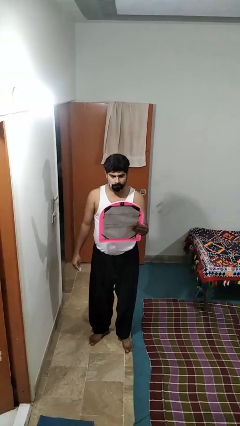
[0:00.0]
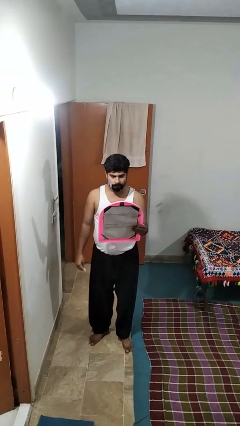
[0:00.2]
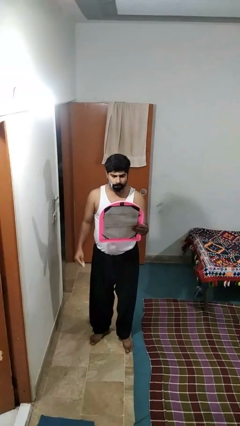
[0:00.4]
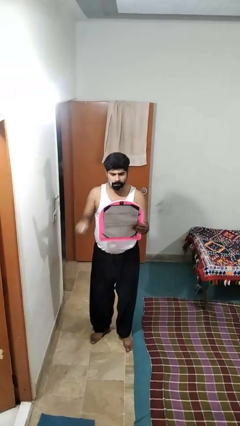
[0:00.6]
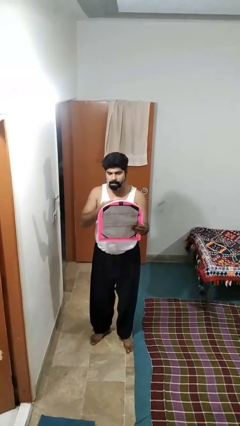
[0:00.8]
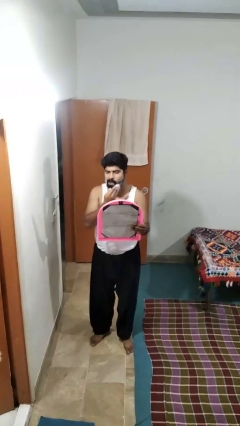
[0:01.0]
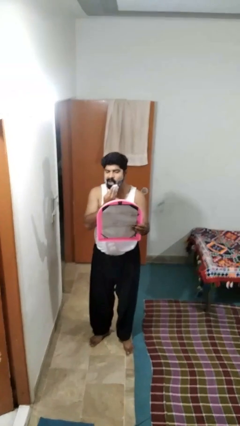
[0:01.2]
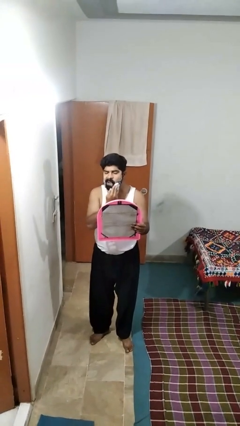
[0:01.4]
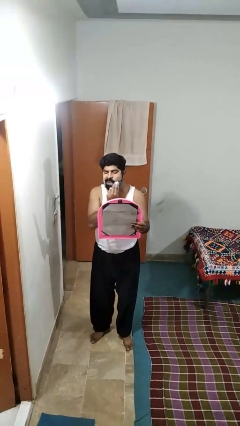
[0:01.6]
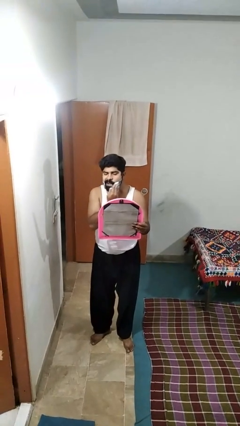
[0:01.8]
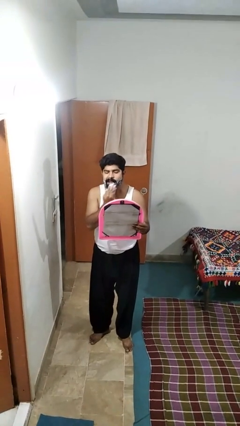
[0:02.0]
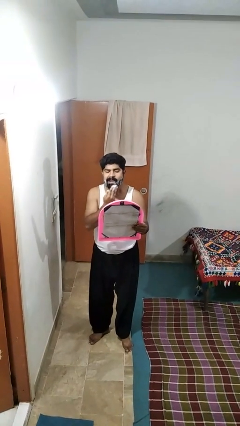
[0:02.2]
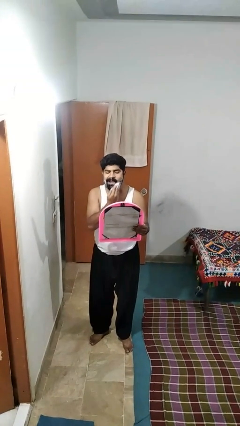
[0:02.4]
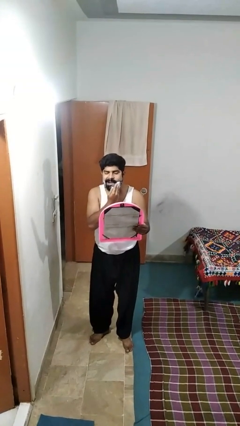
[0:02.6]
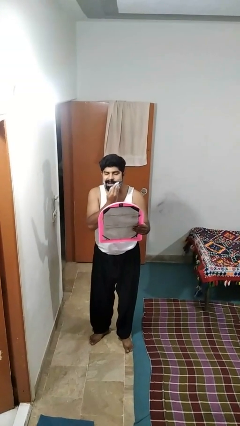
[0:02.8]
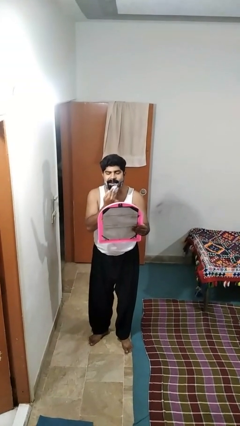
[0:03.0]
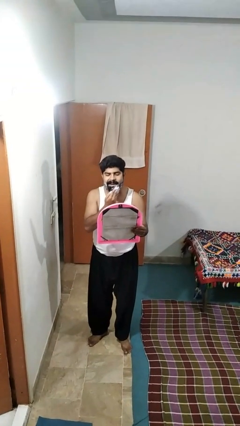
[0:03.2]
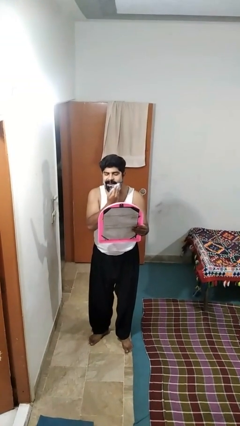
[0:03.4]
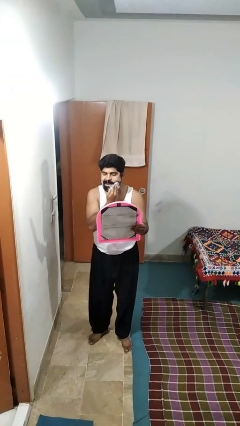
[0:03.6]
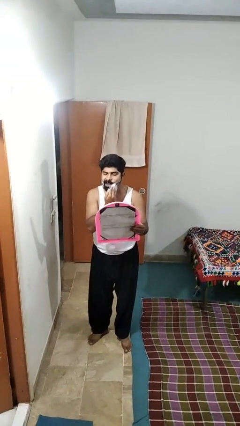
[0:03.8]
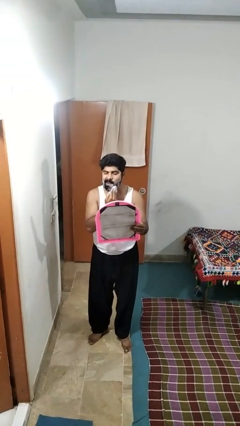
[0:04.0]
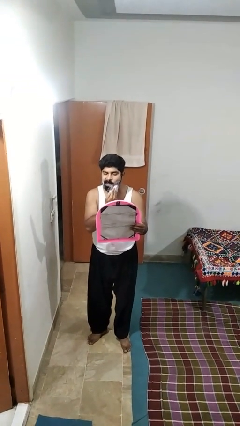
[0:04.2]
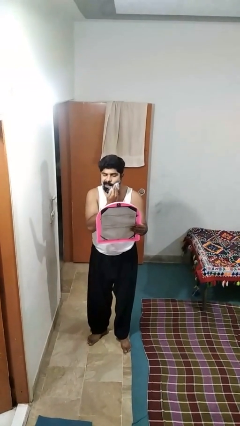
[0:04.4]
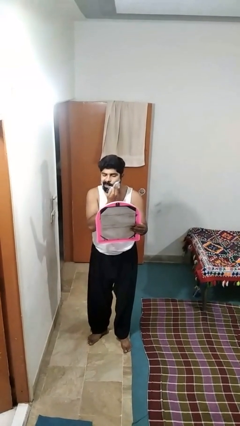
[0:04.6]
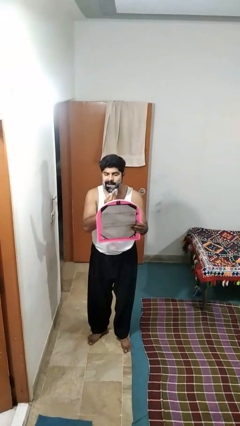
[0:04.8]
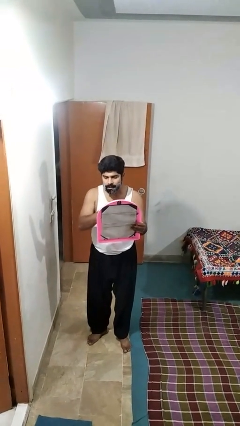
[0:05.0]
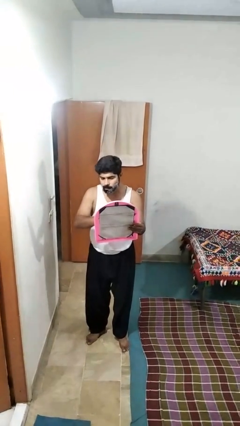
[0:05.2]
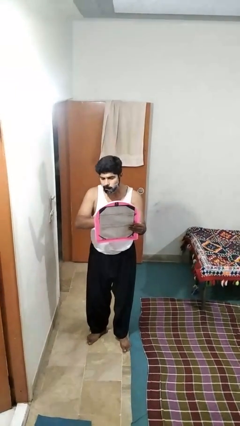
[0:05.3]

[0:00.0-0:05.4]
person applies shaving cream

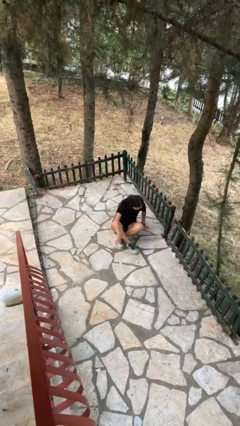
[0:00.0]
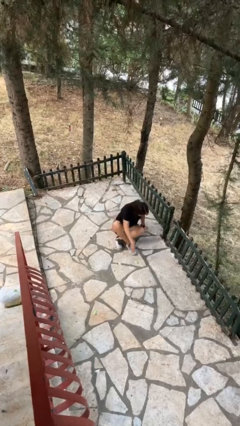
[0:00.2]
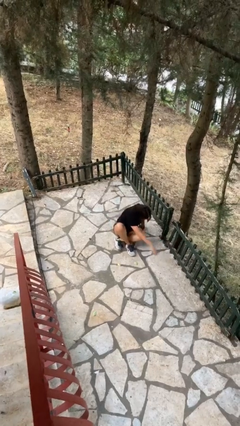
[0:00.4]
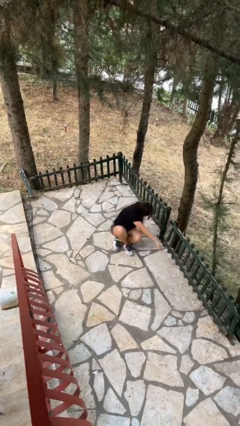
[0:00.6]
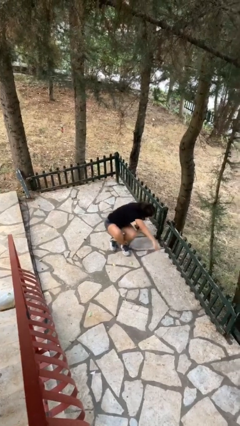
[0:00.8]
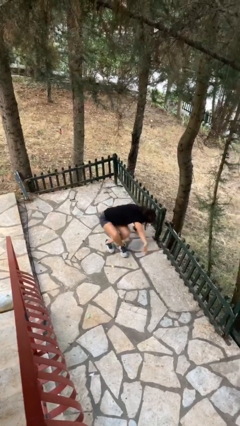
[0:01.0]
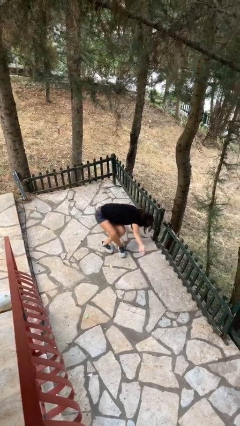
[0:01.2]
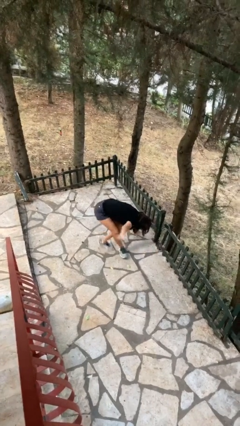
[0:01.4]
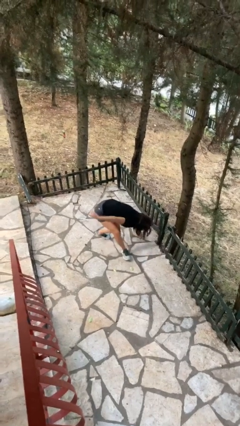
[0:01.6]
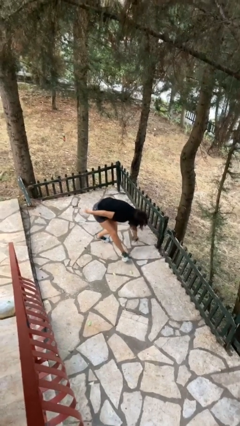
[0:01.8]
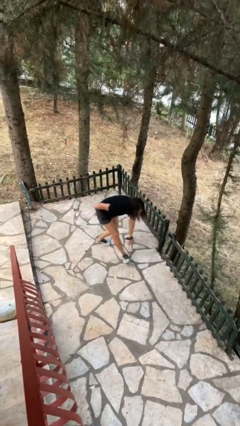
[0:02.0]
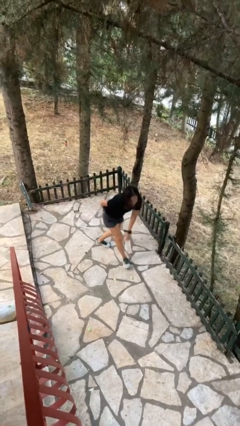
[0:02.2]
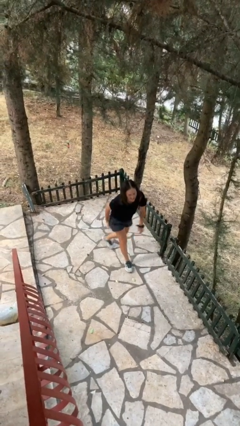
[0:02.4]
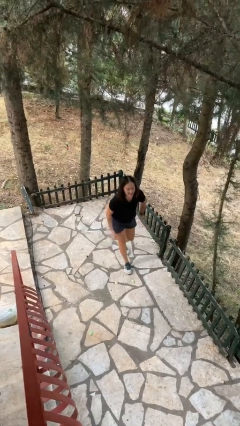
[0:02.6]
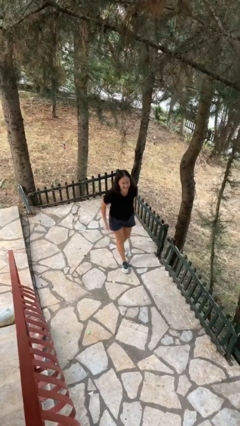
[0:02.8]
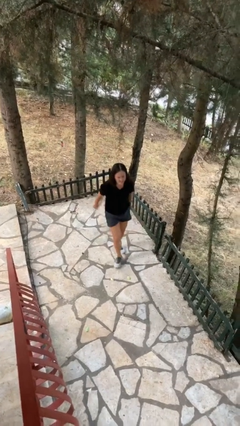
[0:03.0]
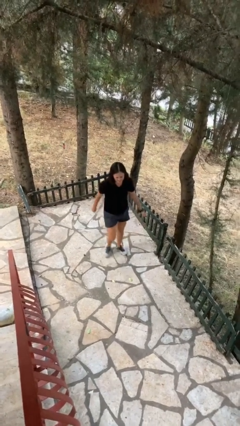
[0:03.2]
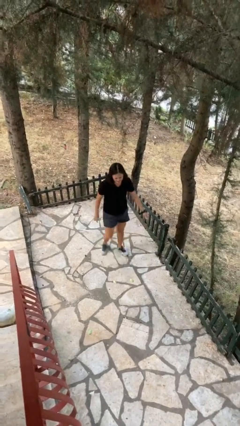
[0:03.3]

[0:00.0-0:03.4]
person stands up from floor

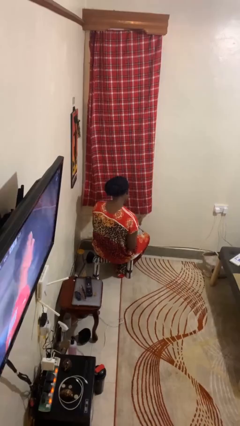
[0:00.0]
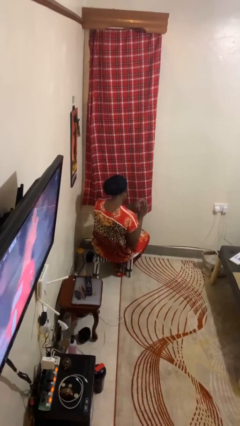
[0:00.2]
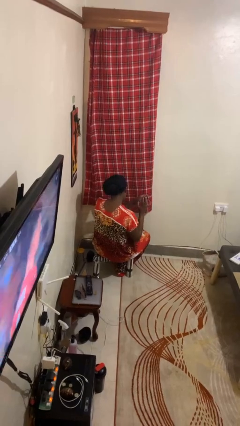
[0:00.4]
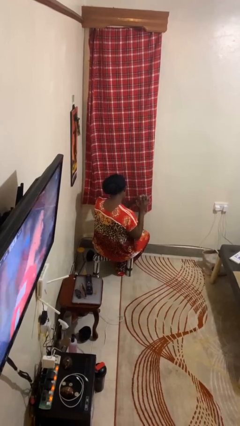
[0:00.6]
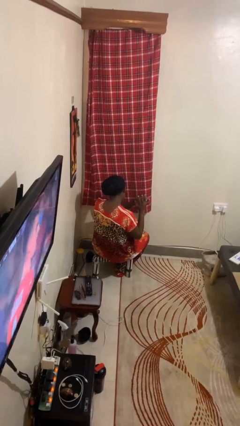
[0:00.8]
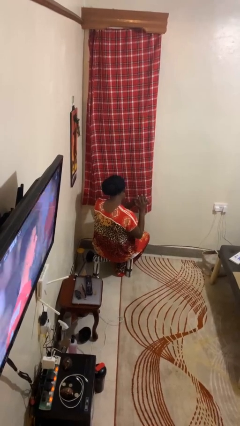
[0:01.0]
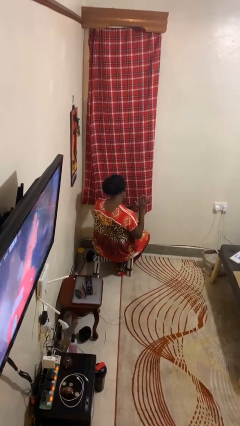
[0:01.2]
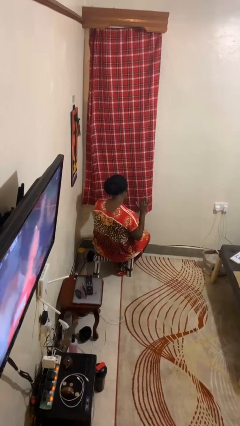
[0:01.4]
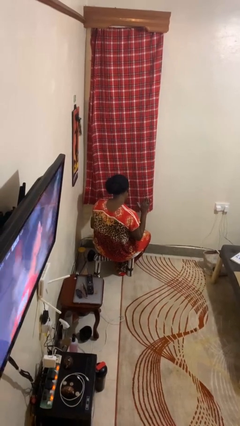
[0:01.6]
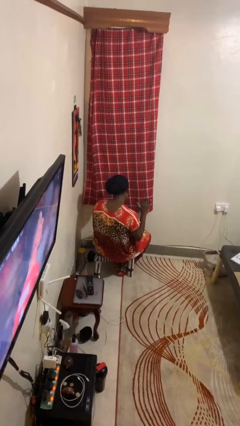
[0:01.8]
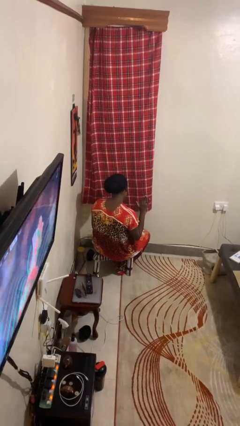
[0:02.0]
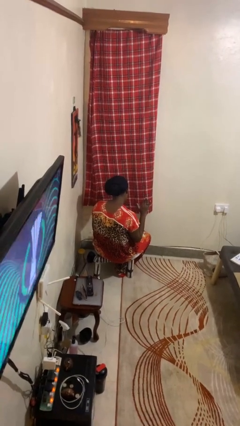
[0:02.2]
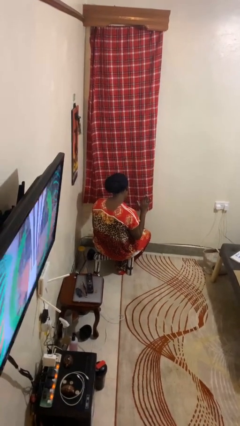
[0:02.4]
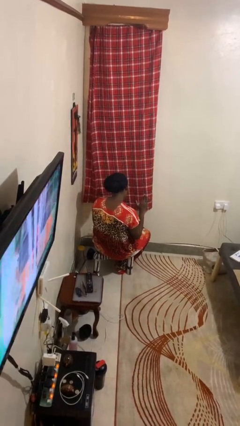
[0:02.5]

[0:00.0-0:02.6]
person puts on ring

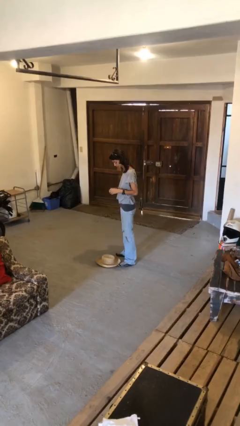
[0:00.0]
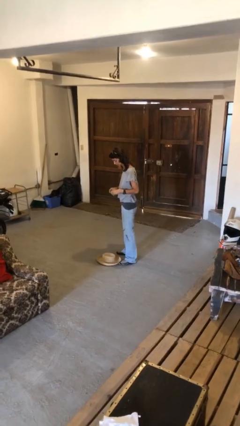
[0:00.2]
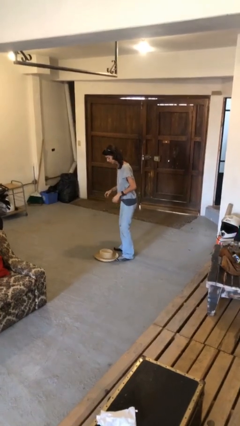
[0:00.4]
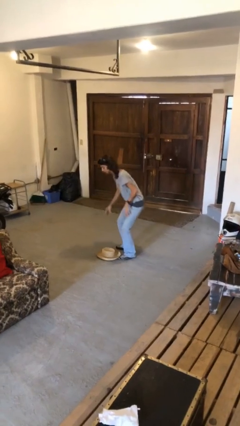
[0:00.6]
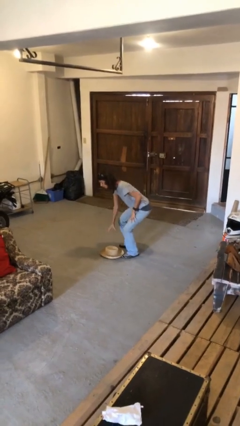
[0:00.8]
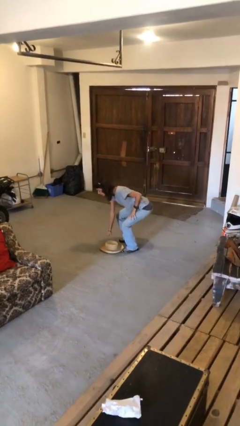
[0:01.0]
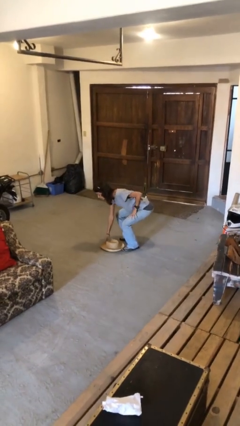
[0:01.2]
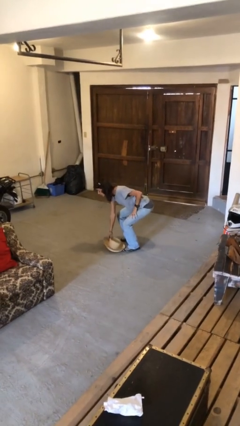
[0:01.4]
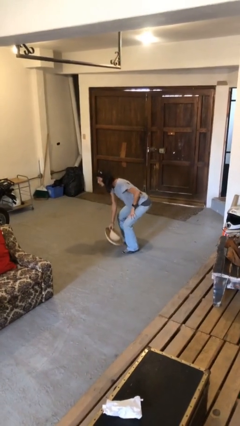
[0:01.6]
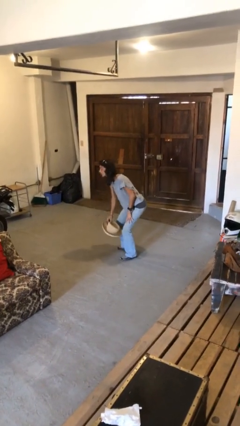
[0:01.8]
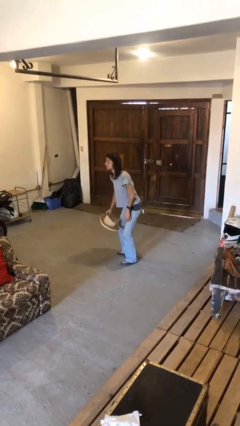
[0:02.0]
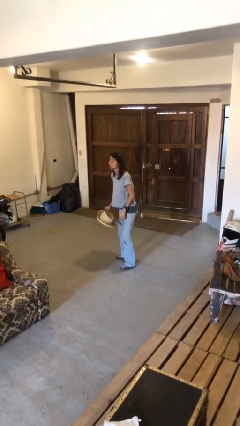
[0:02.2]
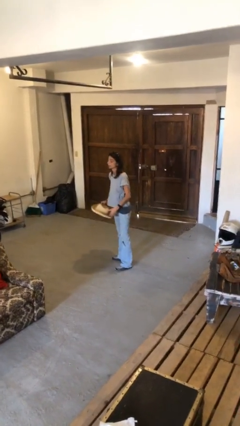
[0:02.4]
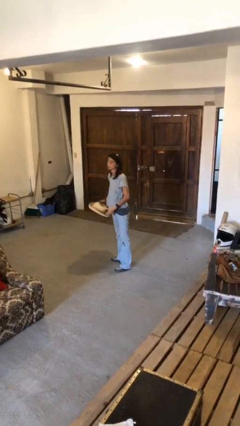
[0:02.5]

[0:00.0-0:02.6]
person picks up object from floor

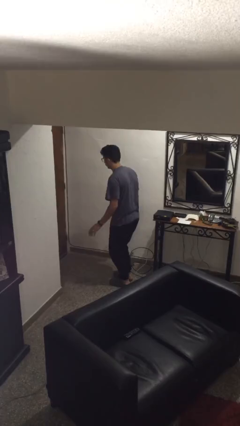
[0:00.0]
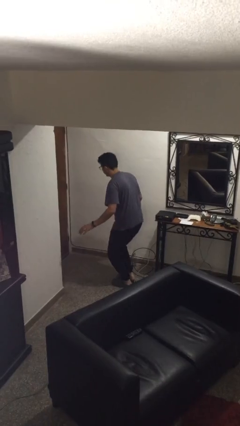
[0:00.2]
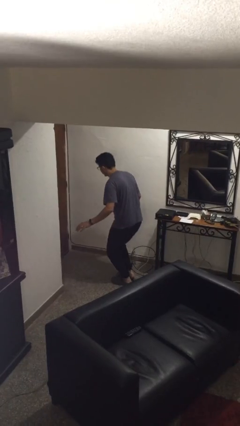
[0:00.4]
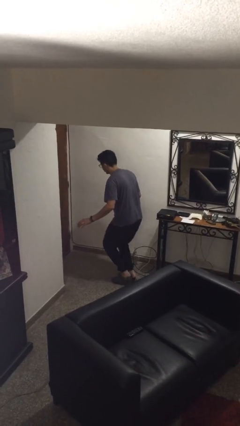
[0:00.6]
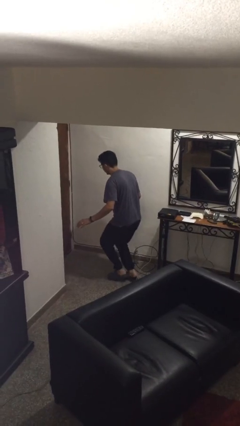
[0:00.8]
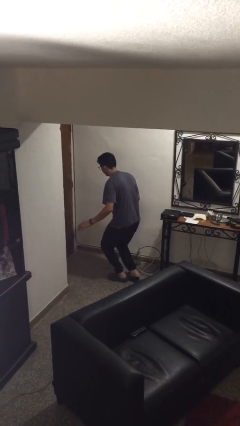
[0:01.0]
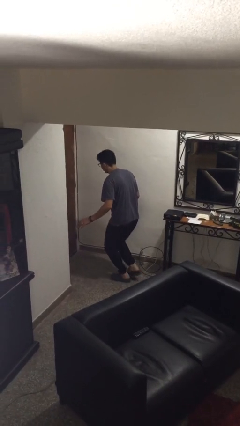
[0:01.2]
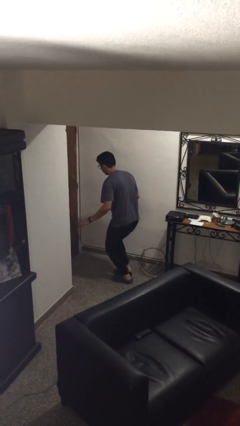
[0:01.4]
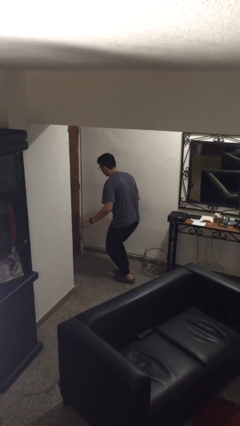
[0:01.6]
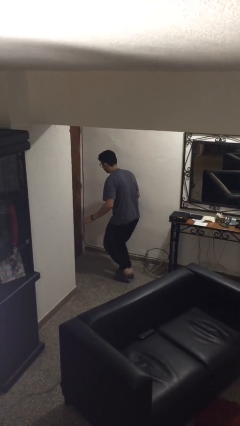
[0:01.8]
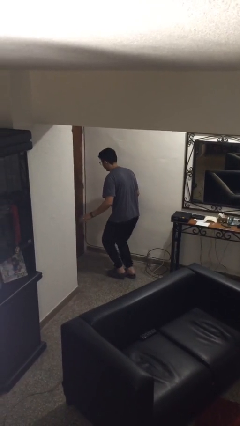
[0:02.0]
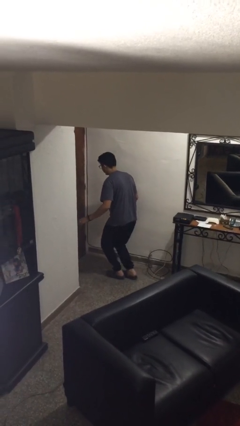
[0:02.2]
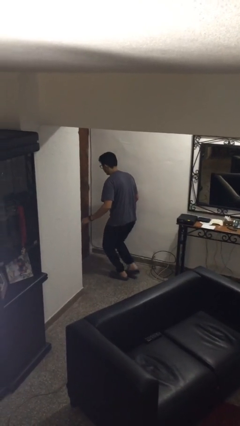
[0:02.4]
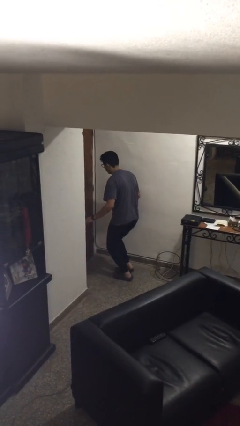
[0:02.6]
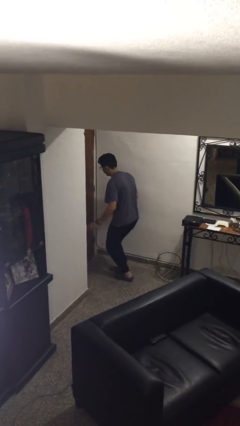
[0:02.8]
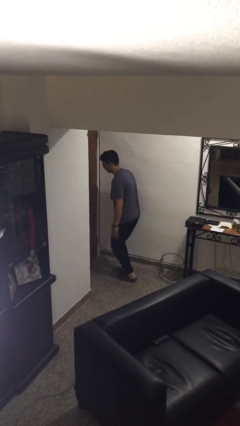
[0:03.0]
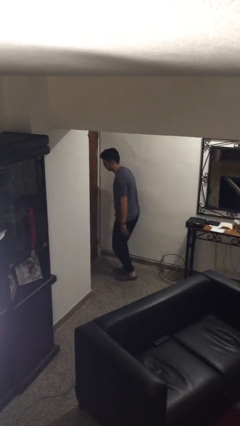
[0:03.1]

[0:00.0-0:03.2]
person walks tiptoe

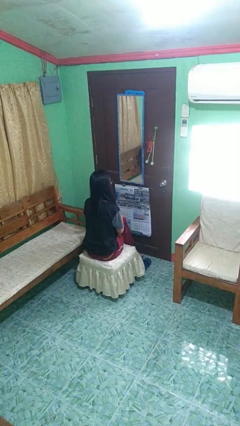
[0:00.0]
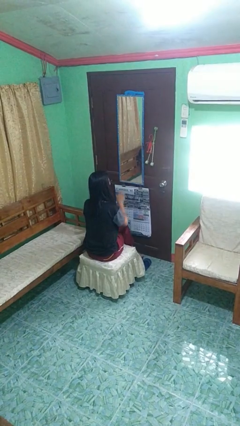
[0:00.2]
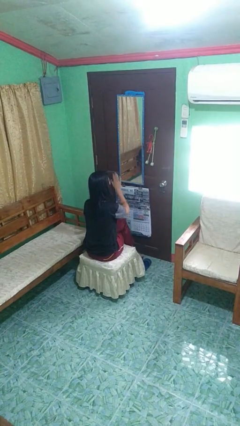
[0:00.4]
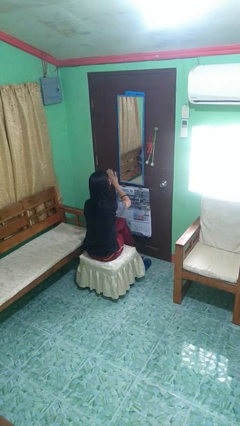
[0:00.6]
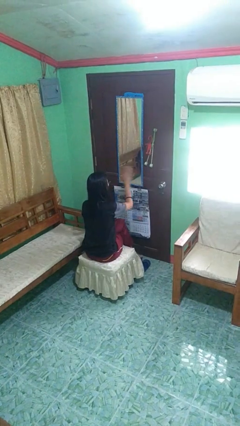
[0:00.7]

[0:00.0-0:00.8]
person gestures swipe left
